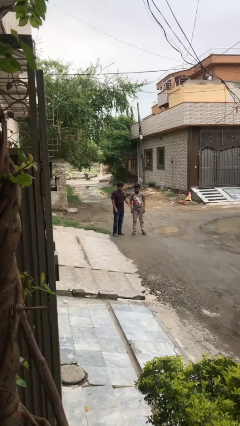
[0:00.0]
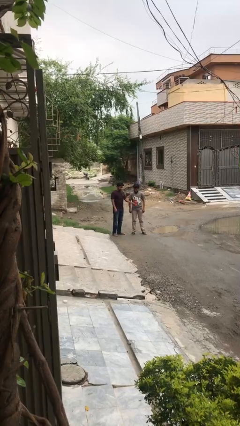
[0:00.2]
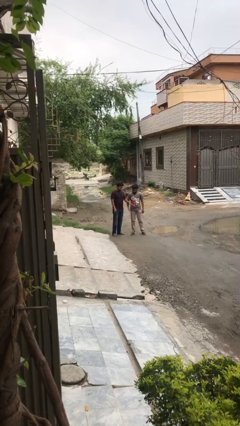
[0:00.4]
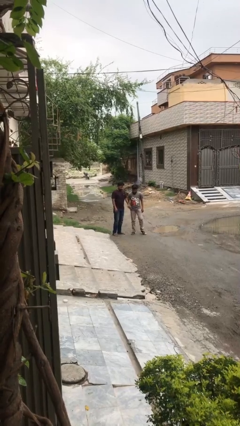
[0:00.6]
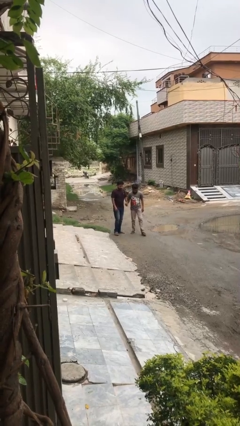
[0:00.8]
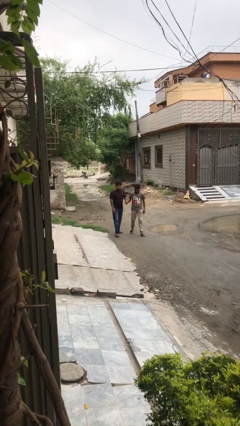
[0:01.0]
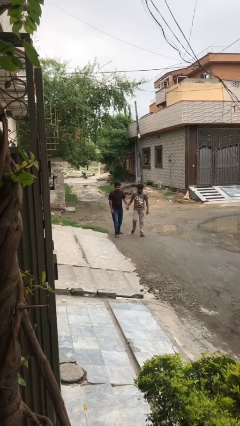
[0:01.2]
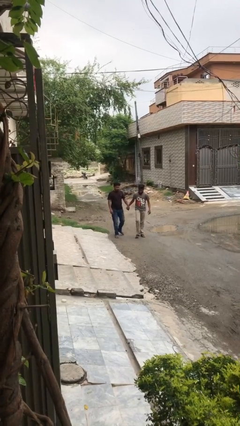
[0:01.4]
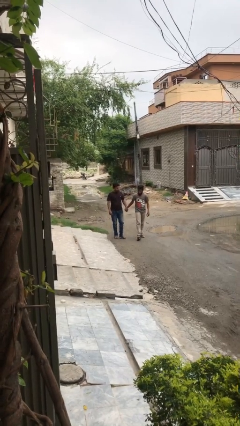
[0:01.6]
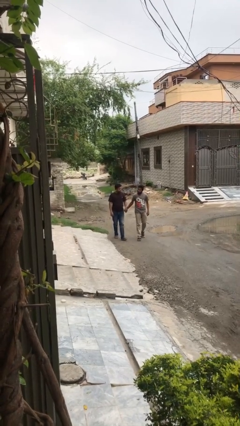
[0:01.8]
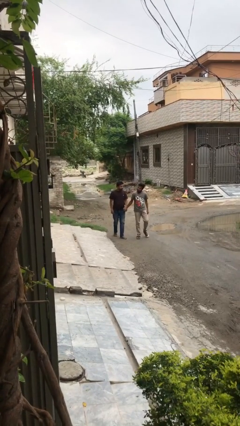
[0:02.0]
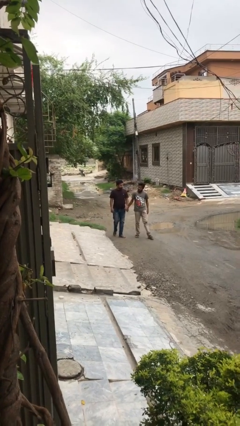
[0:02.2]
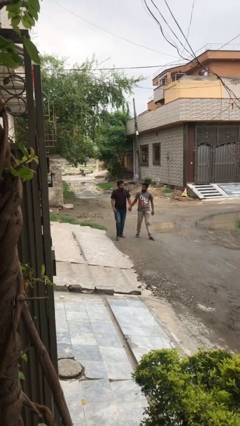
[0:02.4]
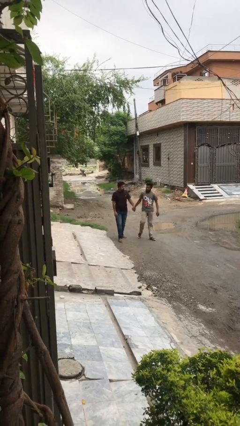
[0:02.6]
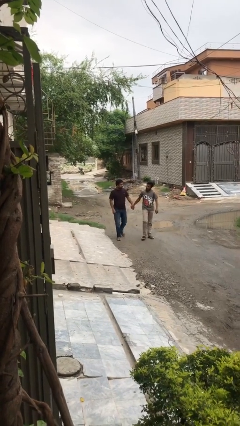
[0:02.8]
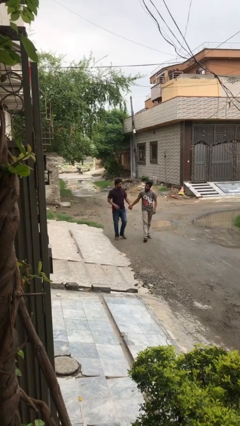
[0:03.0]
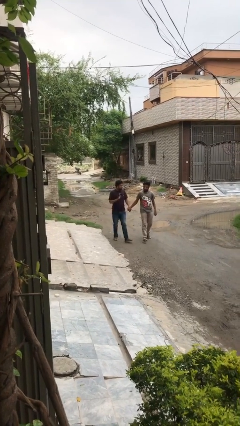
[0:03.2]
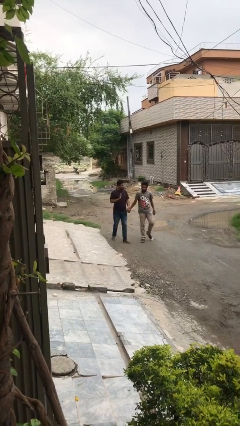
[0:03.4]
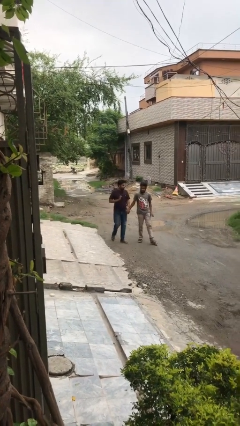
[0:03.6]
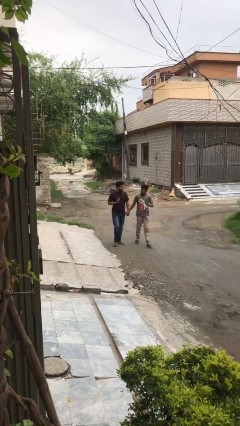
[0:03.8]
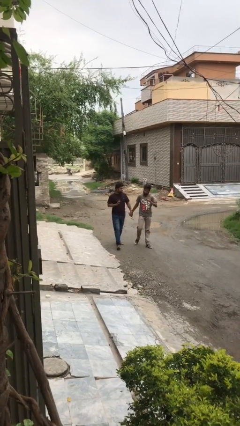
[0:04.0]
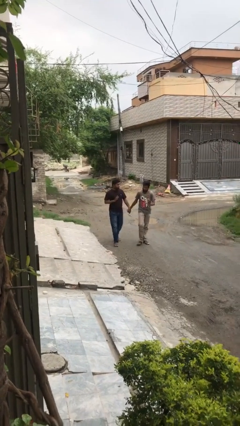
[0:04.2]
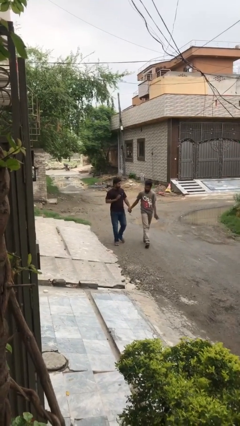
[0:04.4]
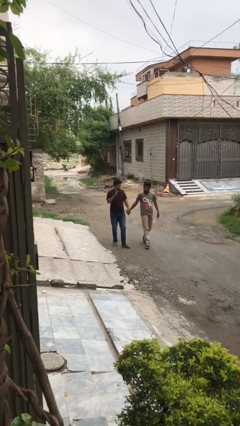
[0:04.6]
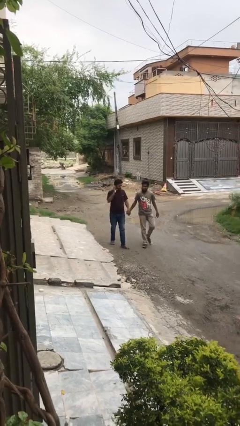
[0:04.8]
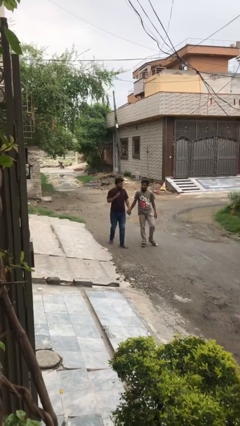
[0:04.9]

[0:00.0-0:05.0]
person holds hand

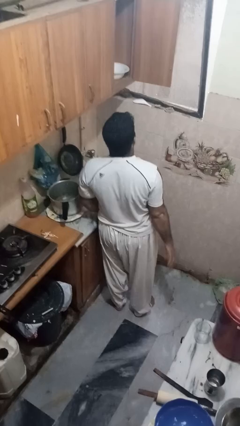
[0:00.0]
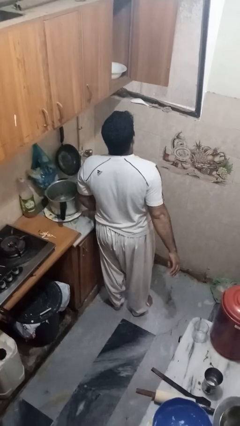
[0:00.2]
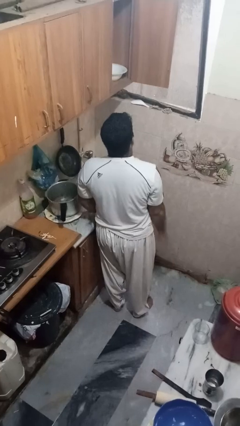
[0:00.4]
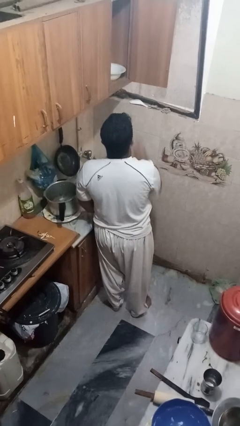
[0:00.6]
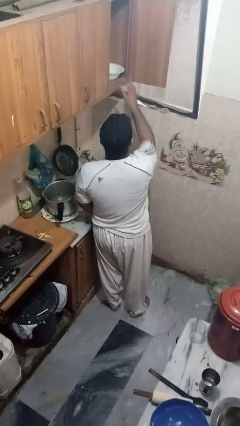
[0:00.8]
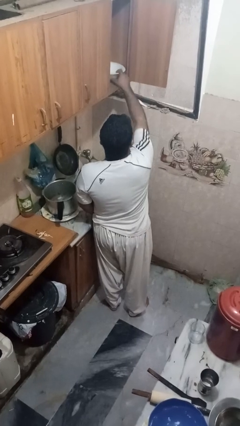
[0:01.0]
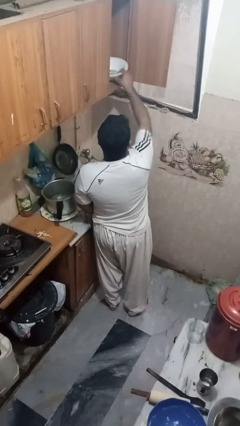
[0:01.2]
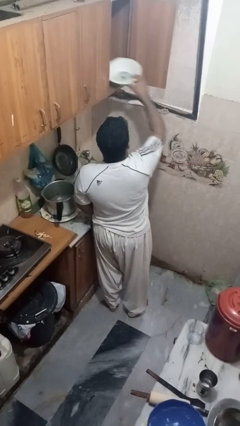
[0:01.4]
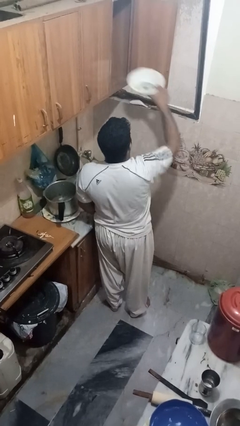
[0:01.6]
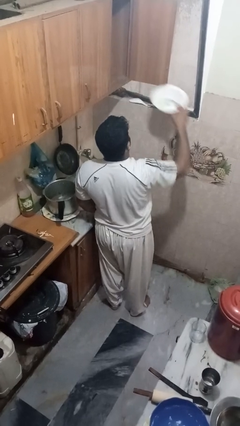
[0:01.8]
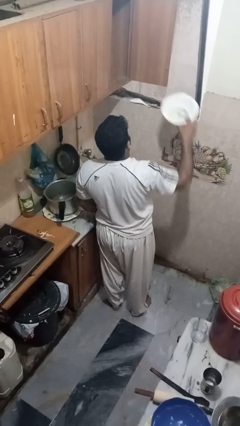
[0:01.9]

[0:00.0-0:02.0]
person takes object from cabinet

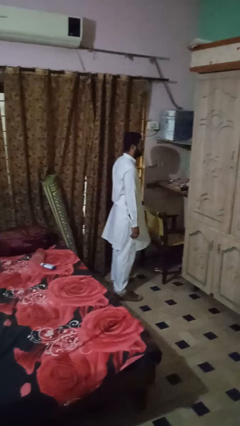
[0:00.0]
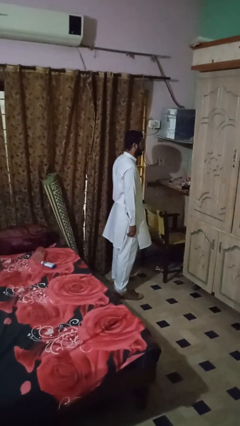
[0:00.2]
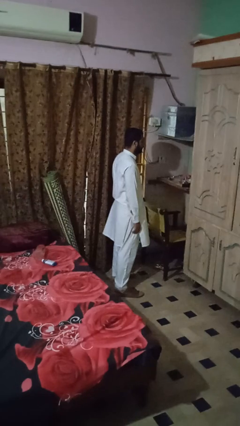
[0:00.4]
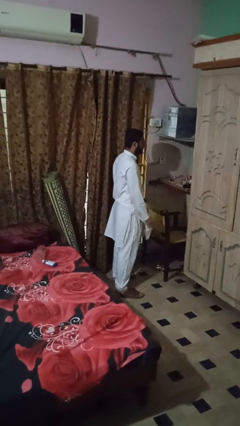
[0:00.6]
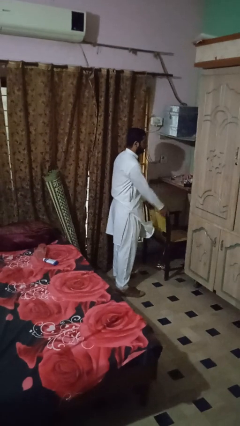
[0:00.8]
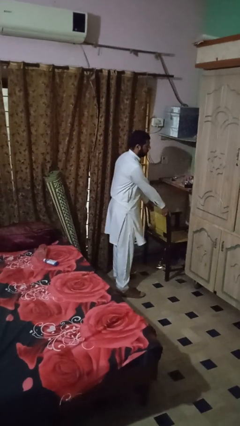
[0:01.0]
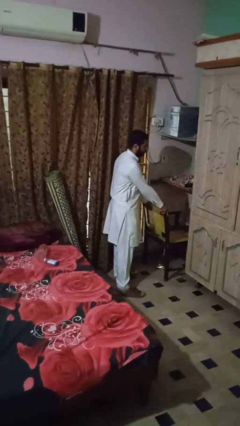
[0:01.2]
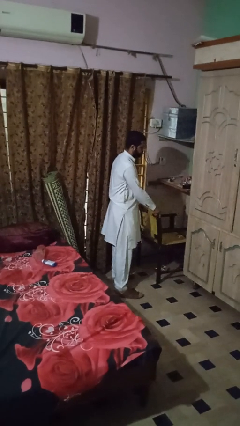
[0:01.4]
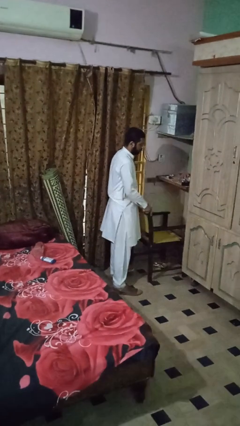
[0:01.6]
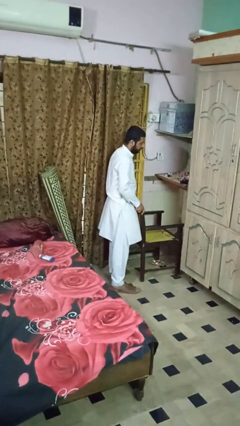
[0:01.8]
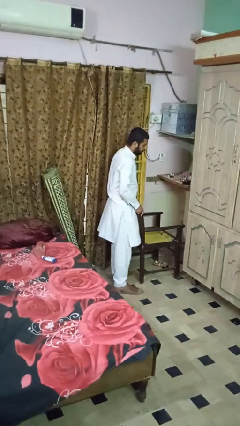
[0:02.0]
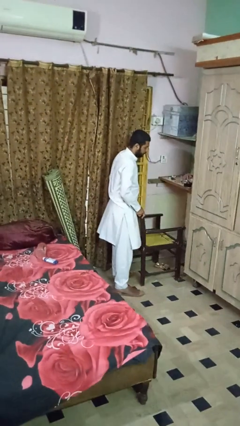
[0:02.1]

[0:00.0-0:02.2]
person pulls out chair

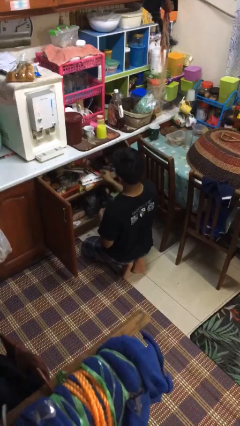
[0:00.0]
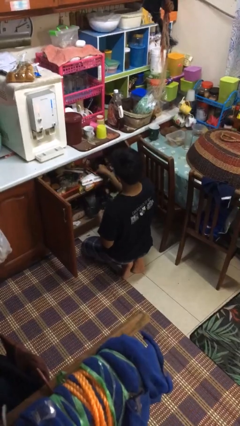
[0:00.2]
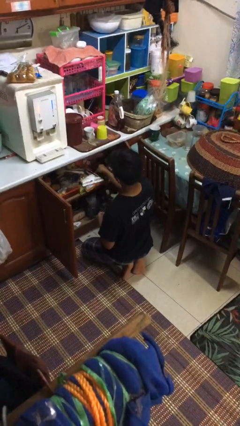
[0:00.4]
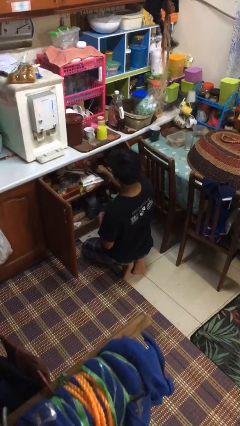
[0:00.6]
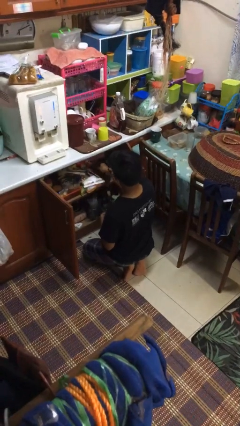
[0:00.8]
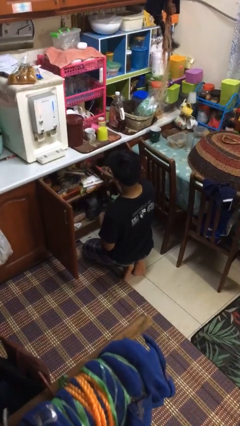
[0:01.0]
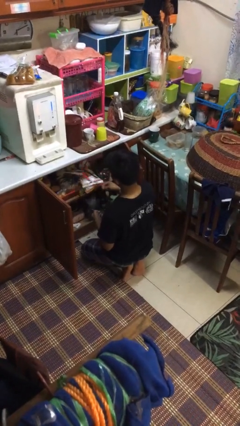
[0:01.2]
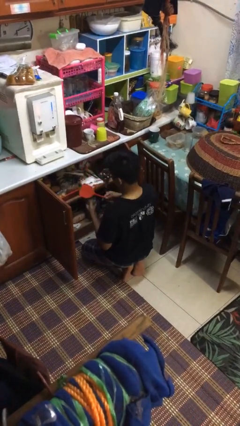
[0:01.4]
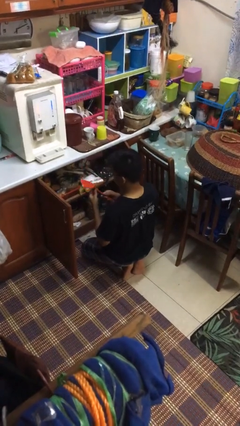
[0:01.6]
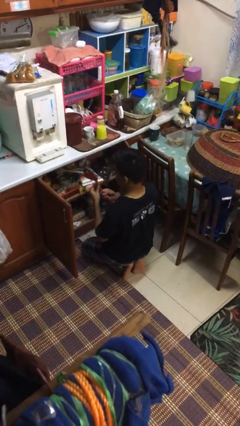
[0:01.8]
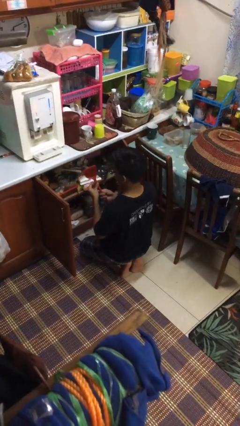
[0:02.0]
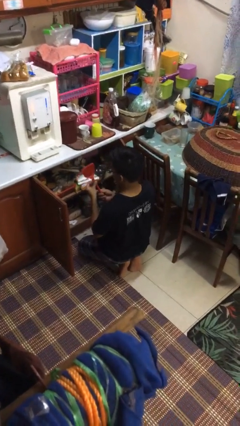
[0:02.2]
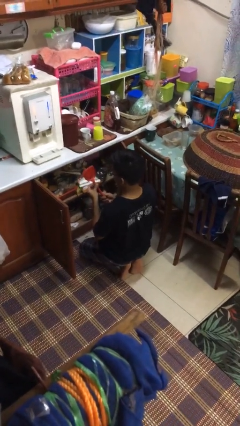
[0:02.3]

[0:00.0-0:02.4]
person takes object from kitchen drawer

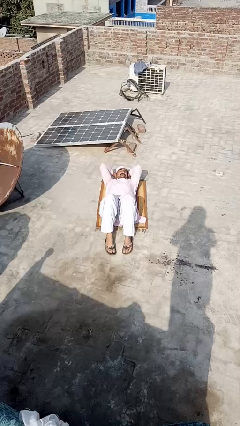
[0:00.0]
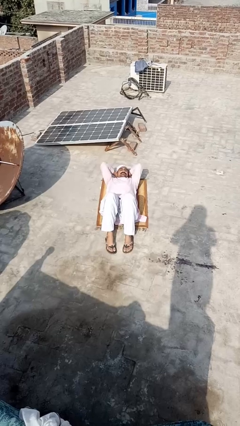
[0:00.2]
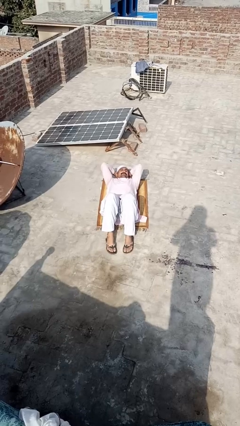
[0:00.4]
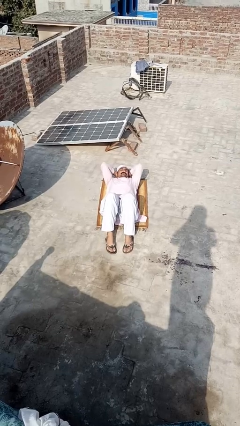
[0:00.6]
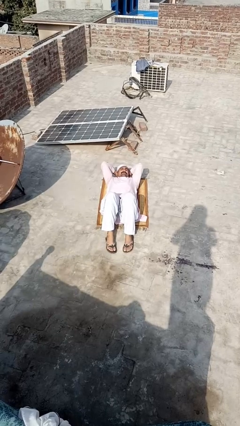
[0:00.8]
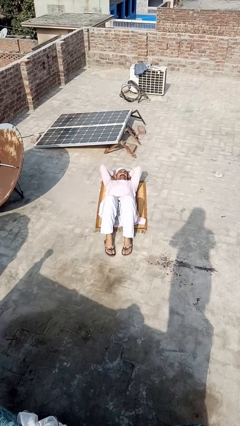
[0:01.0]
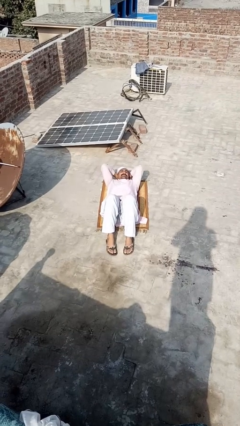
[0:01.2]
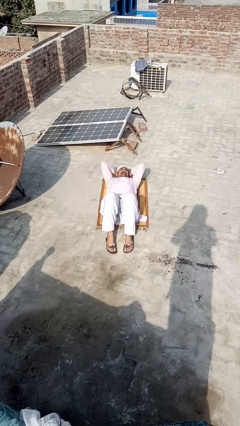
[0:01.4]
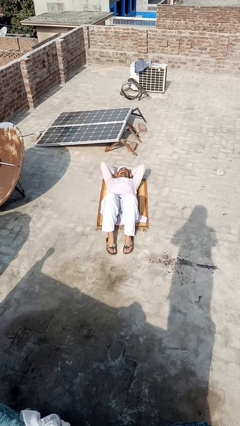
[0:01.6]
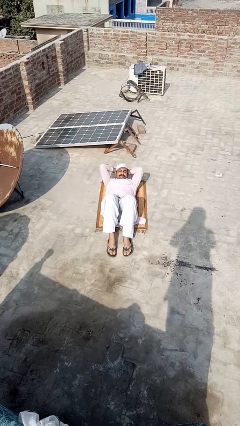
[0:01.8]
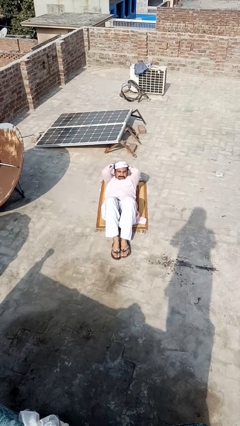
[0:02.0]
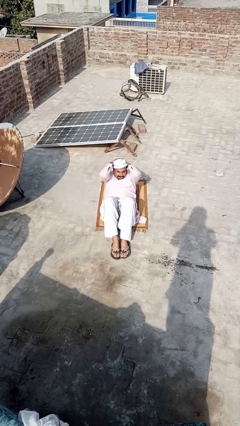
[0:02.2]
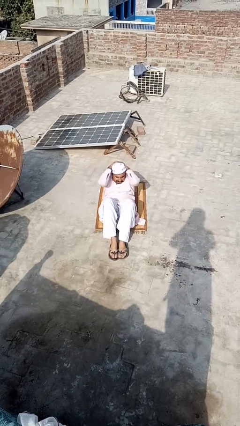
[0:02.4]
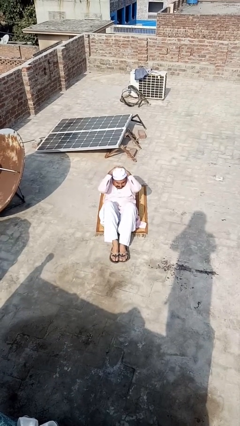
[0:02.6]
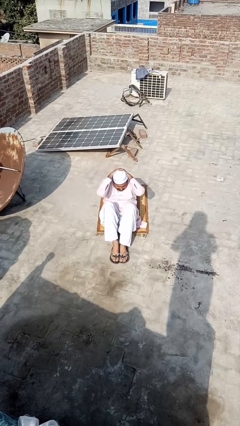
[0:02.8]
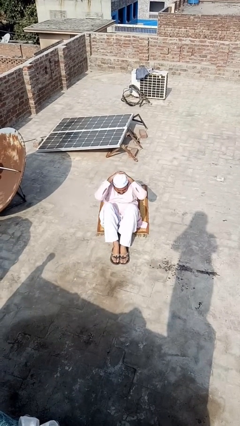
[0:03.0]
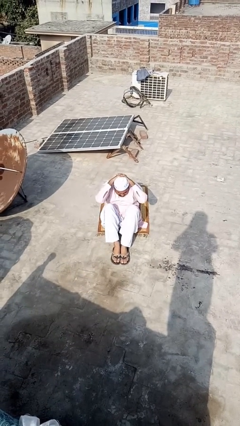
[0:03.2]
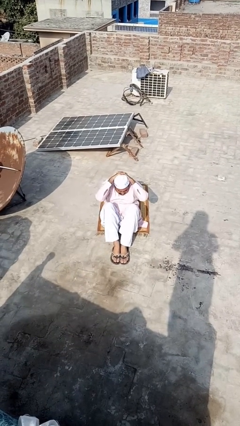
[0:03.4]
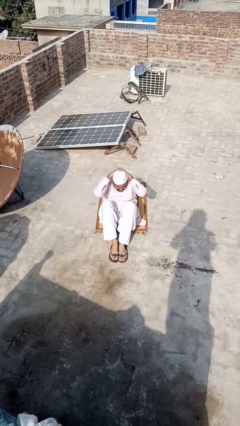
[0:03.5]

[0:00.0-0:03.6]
person exercises with situp

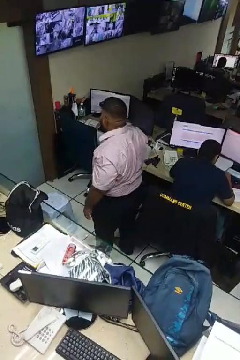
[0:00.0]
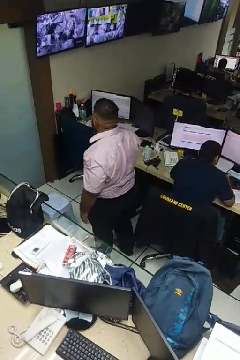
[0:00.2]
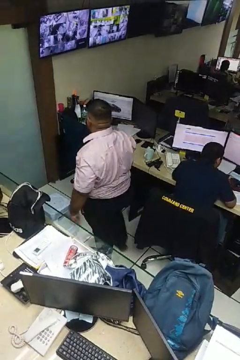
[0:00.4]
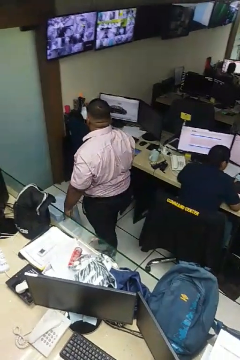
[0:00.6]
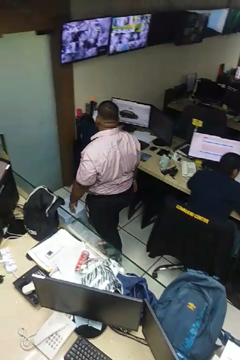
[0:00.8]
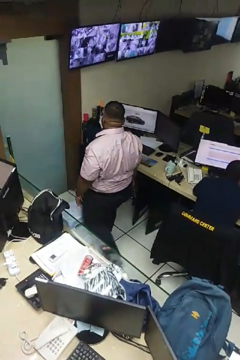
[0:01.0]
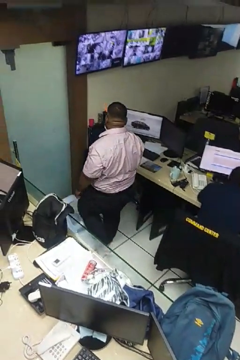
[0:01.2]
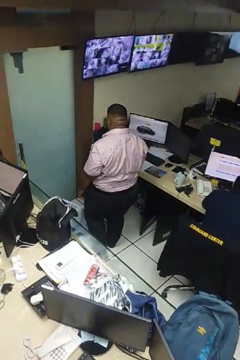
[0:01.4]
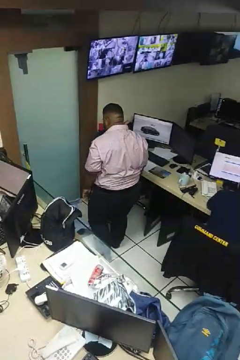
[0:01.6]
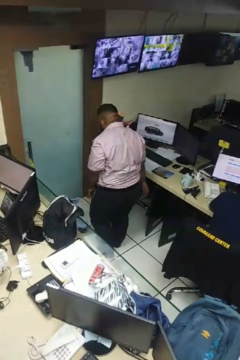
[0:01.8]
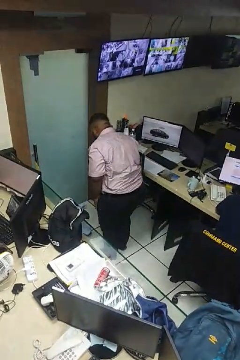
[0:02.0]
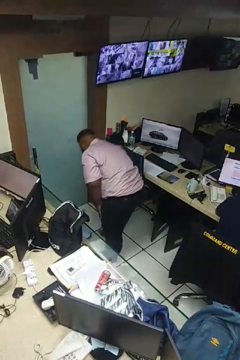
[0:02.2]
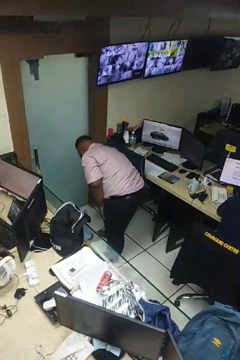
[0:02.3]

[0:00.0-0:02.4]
person knocks over furniture

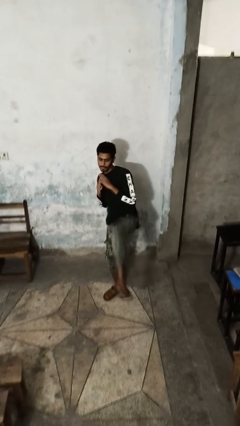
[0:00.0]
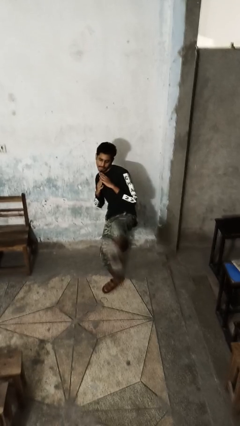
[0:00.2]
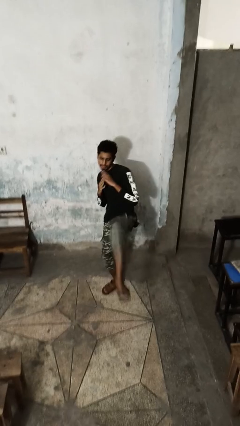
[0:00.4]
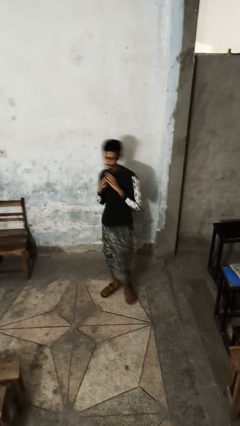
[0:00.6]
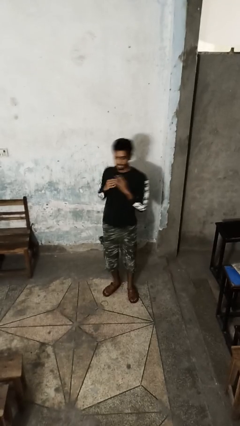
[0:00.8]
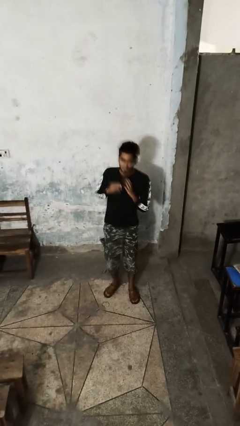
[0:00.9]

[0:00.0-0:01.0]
person karate kicks
